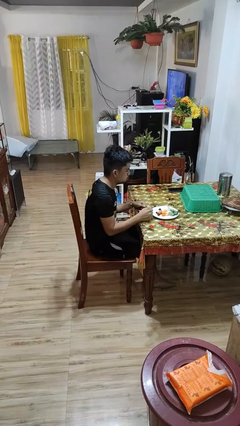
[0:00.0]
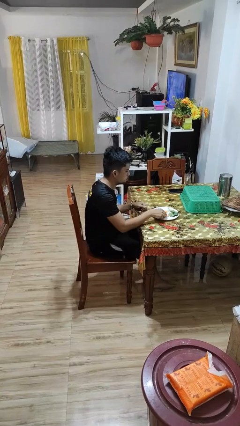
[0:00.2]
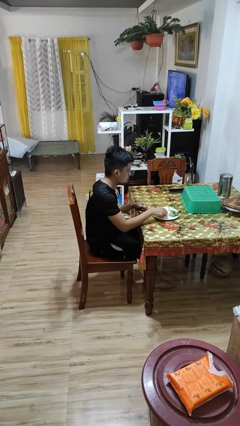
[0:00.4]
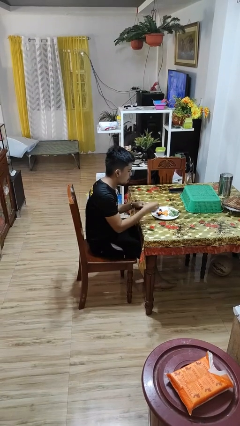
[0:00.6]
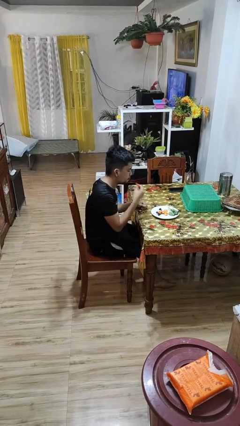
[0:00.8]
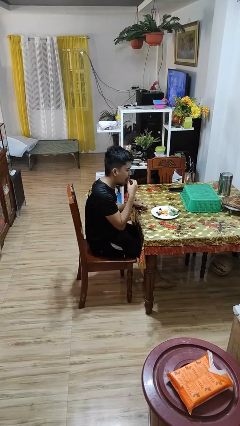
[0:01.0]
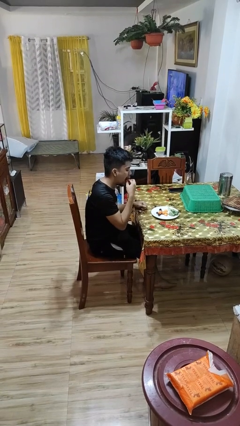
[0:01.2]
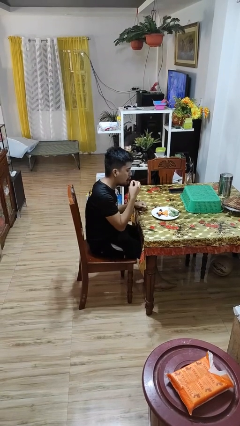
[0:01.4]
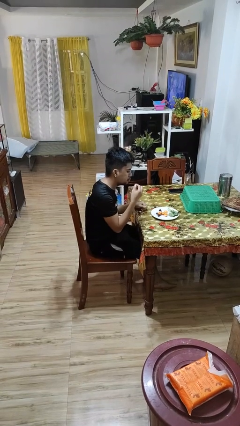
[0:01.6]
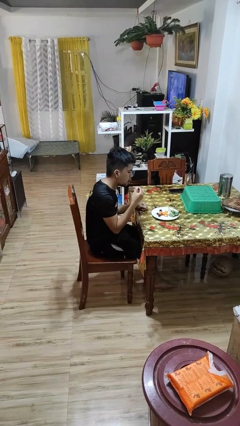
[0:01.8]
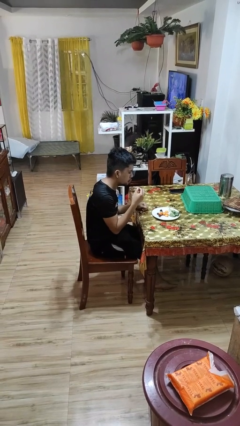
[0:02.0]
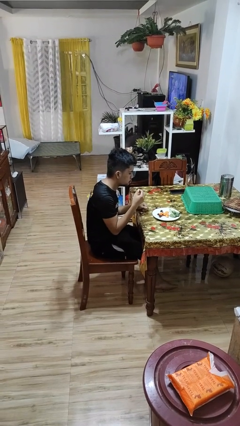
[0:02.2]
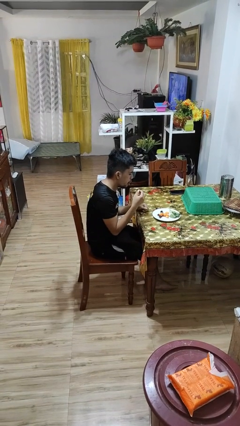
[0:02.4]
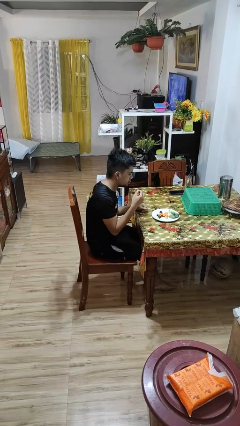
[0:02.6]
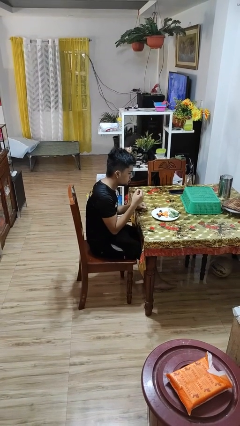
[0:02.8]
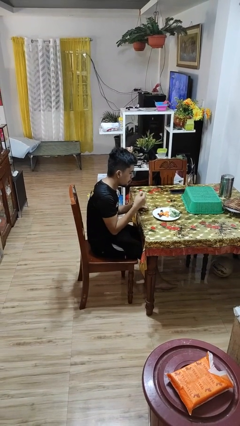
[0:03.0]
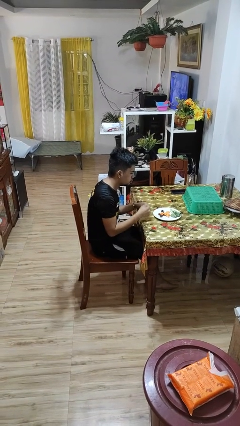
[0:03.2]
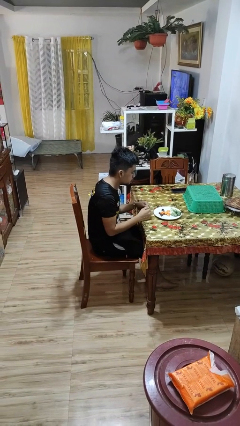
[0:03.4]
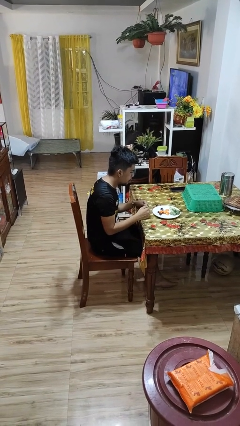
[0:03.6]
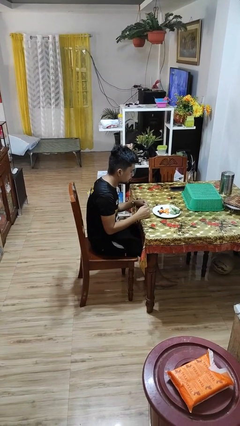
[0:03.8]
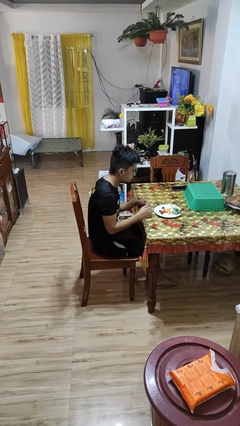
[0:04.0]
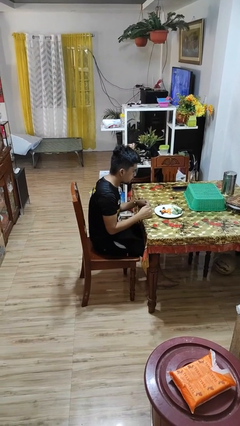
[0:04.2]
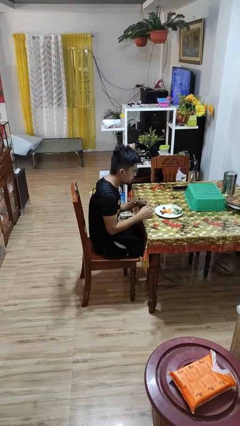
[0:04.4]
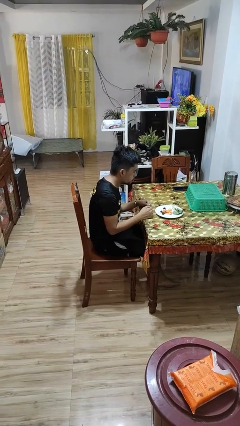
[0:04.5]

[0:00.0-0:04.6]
person eats with hands

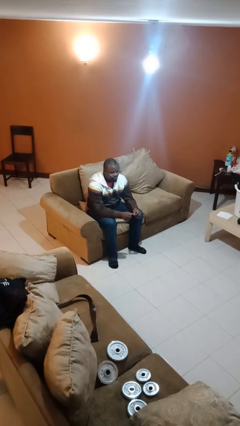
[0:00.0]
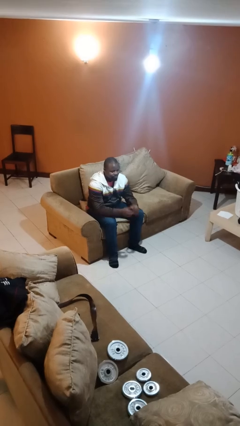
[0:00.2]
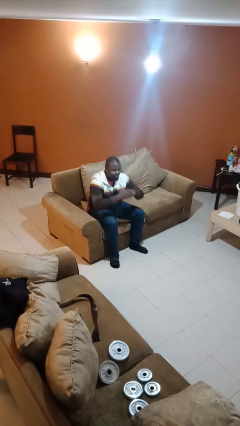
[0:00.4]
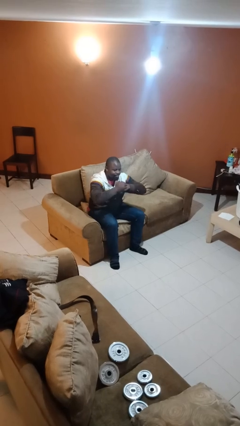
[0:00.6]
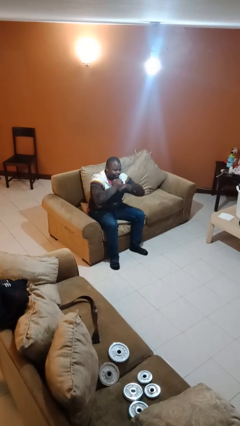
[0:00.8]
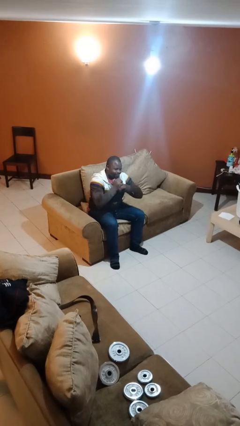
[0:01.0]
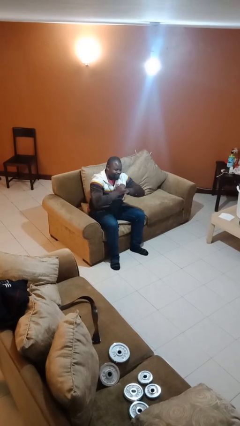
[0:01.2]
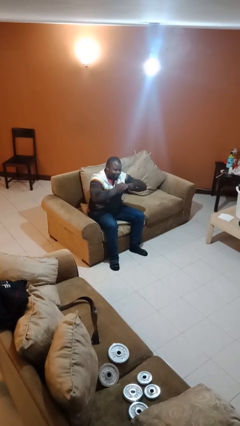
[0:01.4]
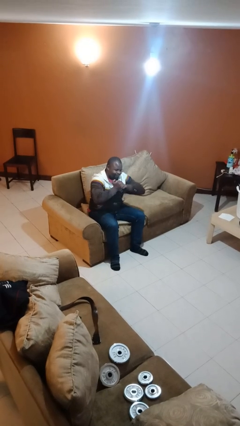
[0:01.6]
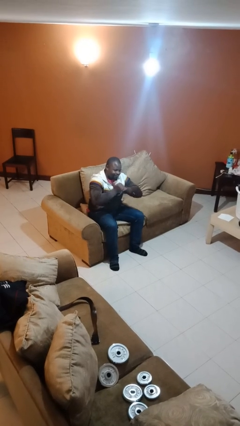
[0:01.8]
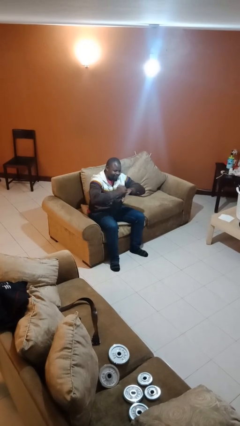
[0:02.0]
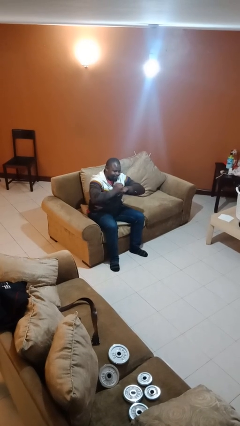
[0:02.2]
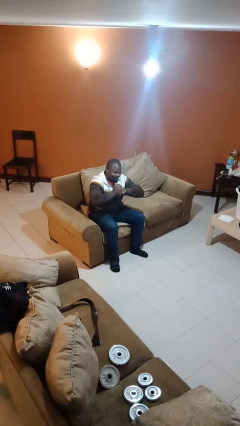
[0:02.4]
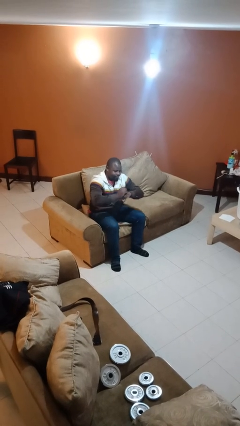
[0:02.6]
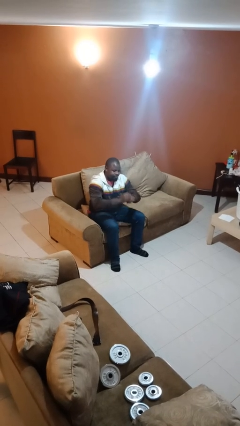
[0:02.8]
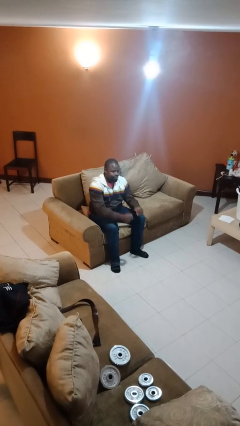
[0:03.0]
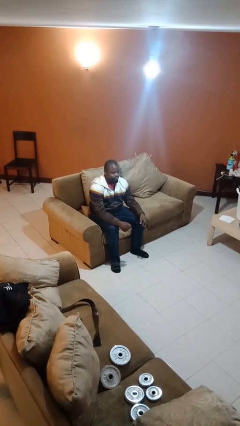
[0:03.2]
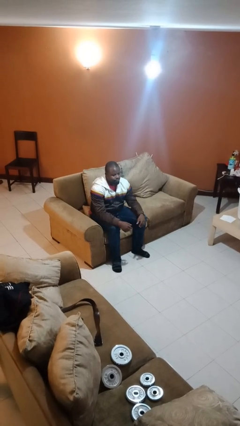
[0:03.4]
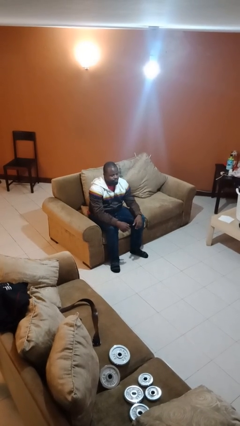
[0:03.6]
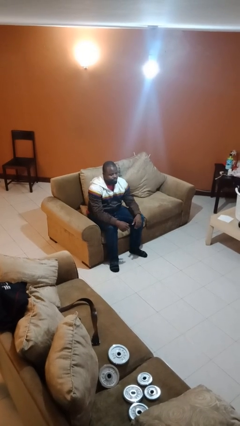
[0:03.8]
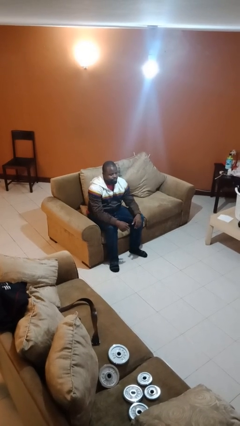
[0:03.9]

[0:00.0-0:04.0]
person cracks knuckles

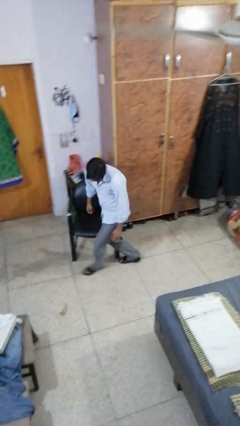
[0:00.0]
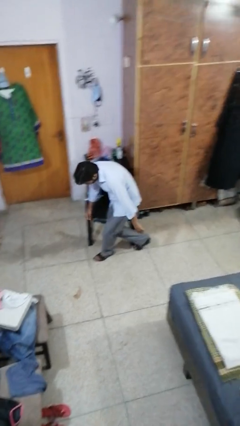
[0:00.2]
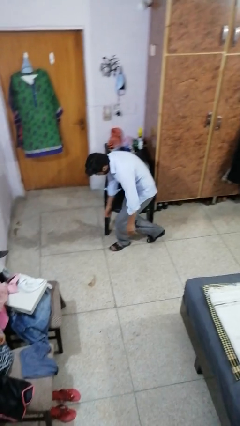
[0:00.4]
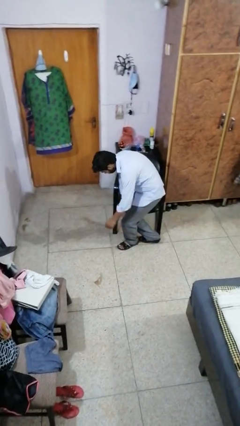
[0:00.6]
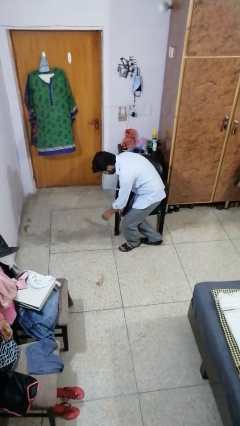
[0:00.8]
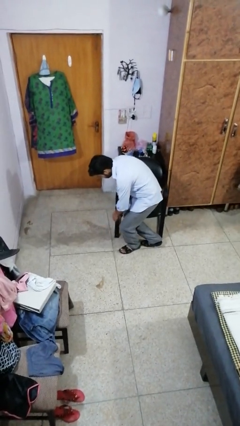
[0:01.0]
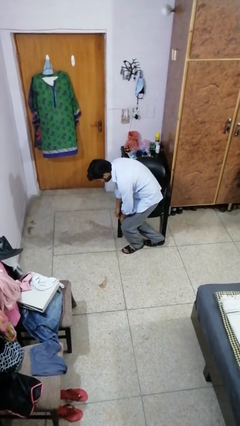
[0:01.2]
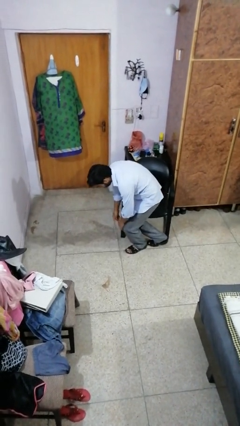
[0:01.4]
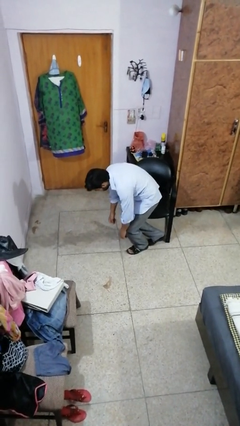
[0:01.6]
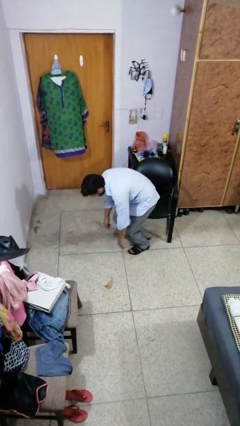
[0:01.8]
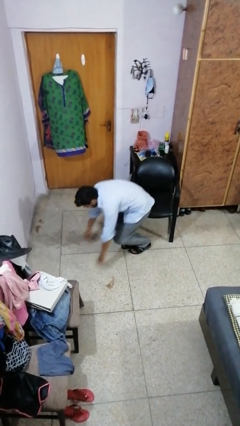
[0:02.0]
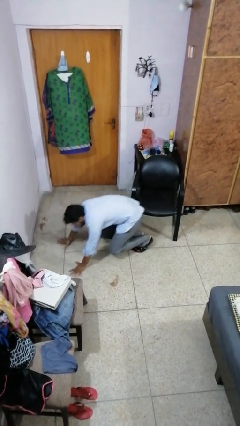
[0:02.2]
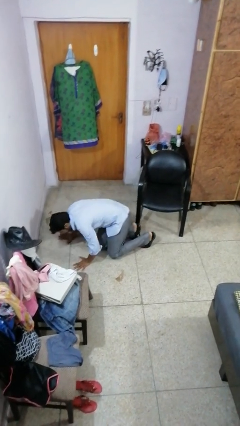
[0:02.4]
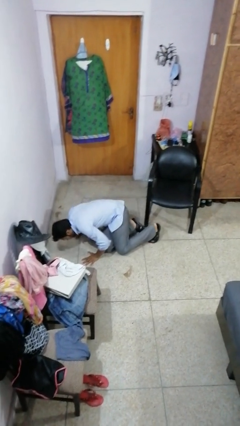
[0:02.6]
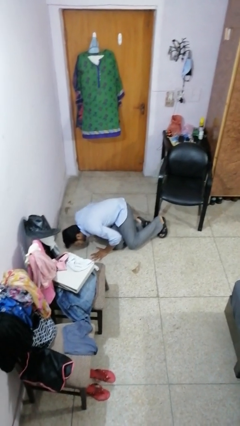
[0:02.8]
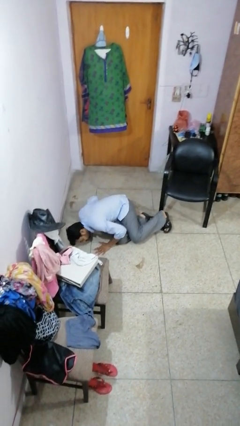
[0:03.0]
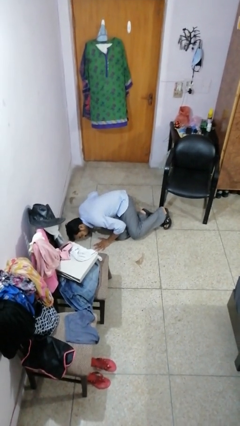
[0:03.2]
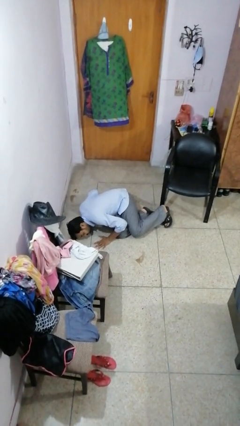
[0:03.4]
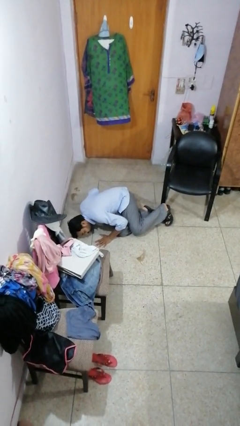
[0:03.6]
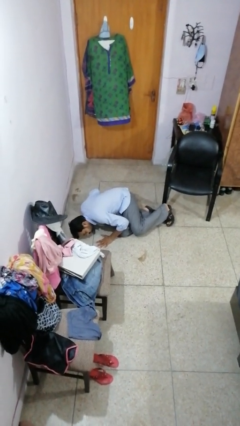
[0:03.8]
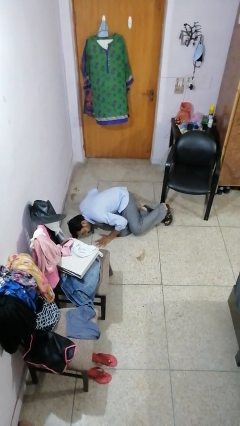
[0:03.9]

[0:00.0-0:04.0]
person lies down on floor

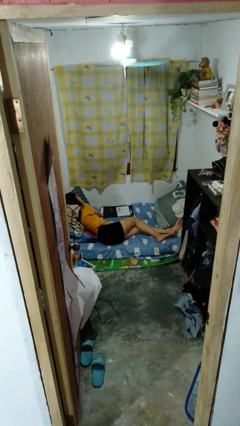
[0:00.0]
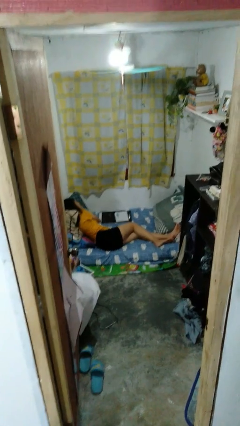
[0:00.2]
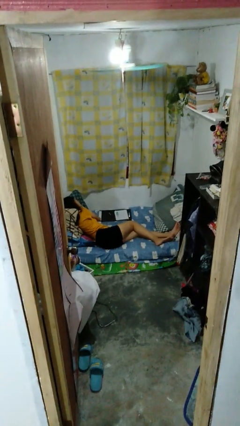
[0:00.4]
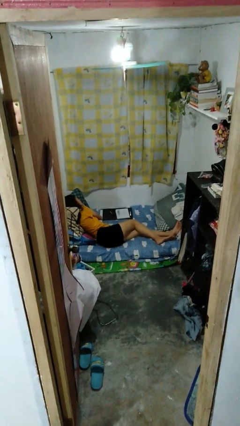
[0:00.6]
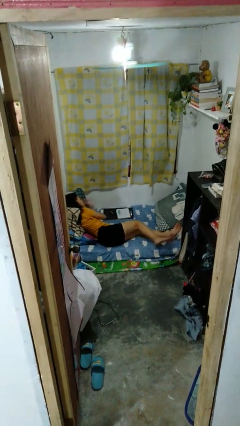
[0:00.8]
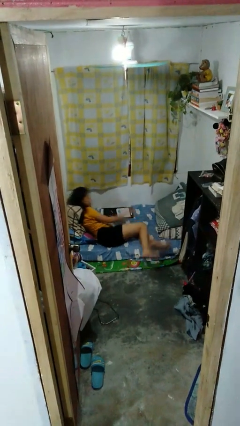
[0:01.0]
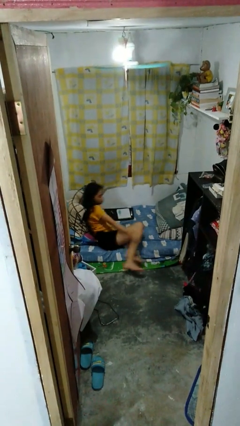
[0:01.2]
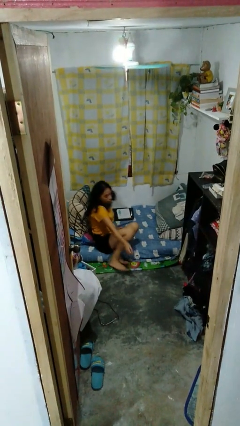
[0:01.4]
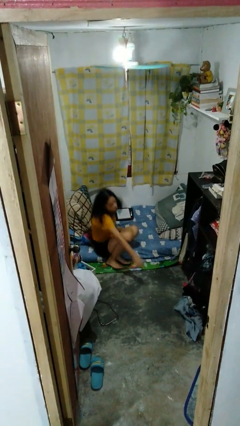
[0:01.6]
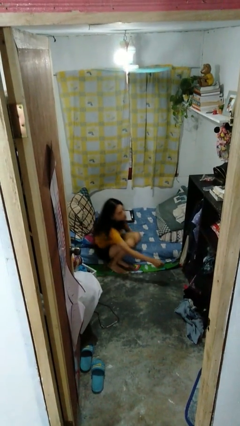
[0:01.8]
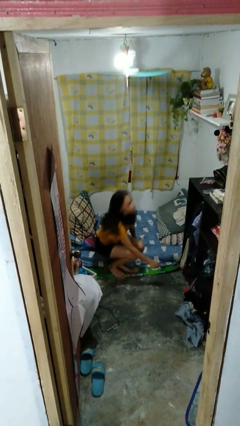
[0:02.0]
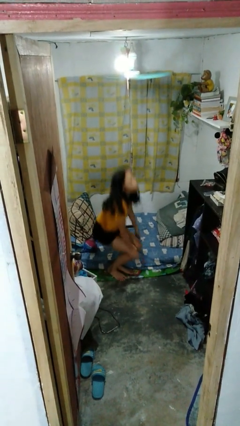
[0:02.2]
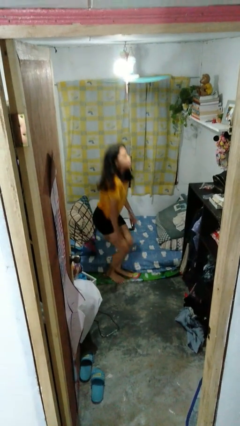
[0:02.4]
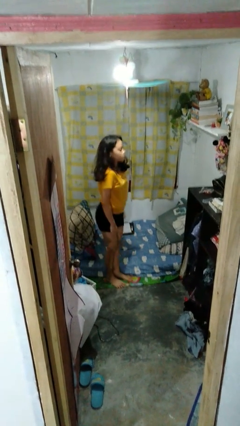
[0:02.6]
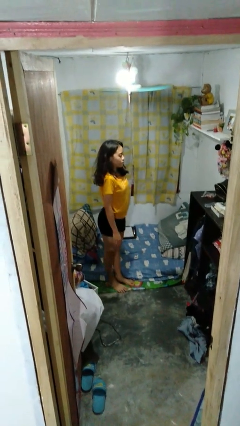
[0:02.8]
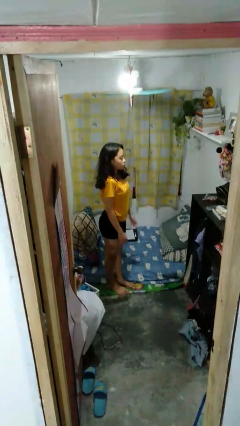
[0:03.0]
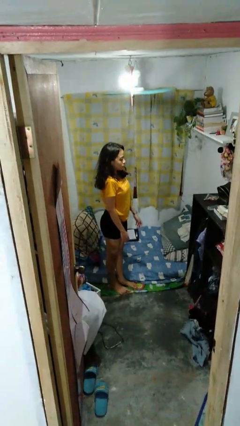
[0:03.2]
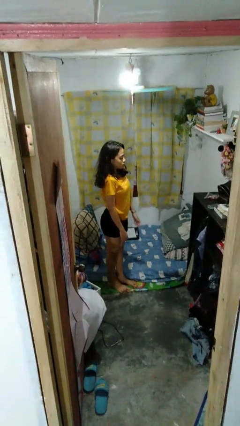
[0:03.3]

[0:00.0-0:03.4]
person stands up

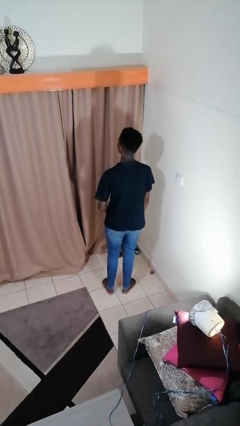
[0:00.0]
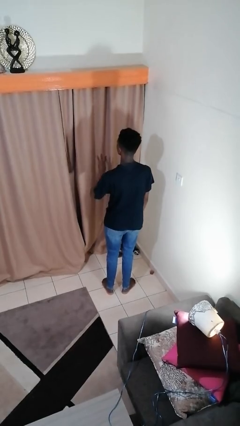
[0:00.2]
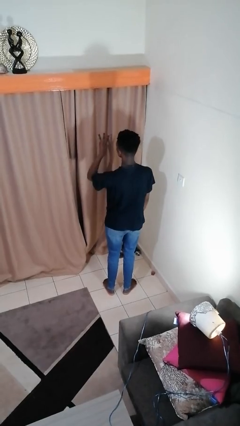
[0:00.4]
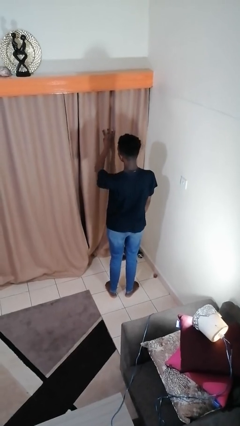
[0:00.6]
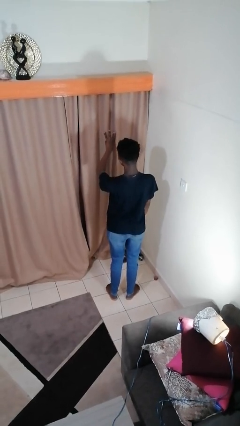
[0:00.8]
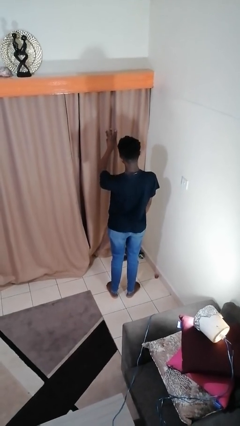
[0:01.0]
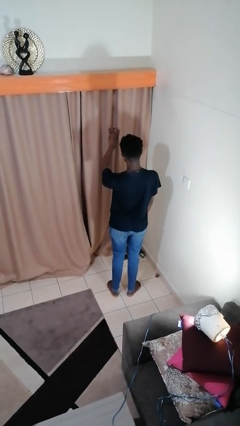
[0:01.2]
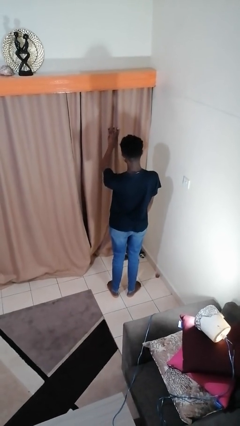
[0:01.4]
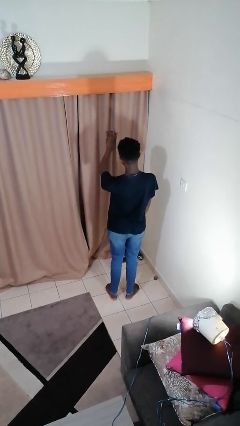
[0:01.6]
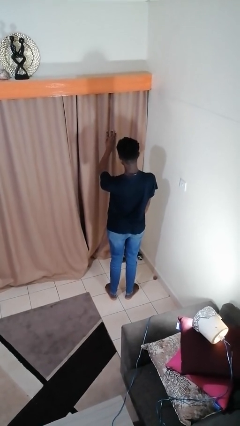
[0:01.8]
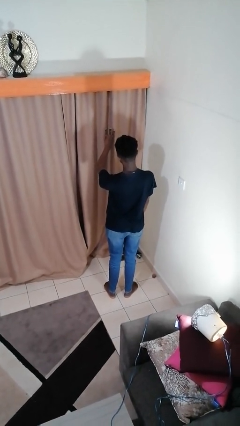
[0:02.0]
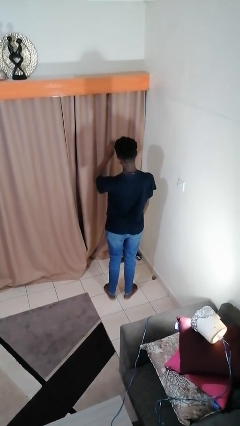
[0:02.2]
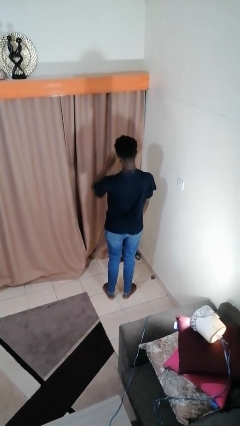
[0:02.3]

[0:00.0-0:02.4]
person gestures number three
